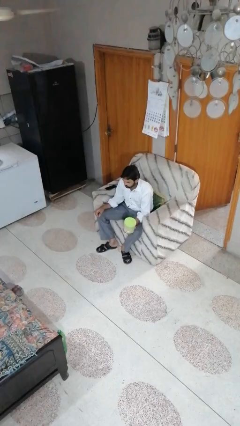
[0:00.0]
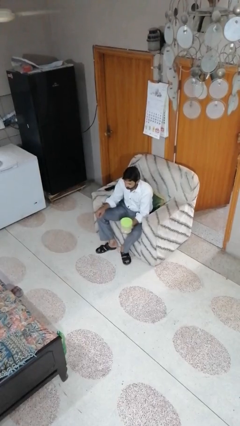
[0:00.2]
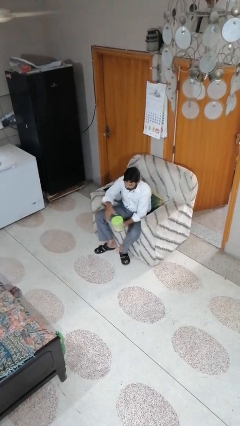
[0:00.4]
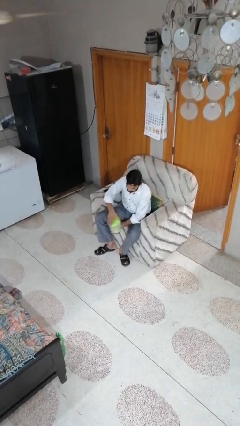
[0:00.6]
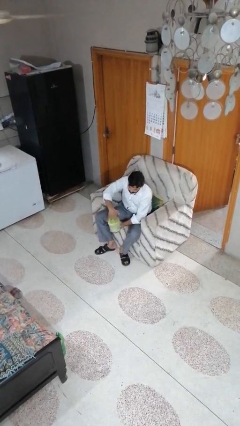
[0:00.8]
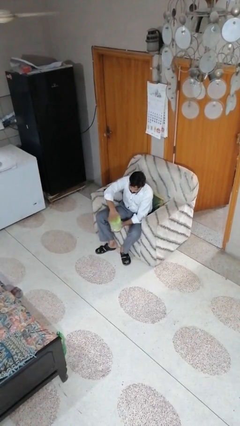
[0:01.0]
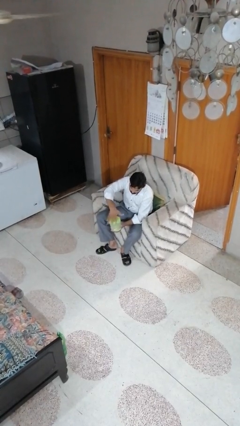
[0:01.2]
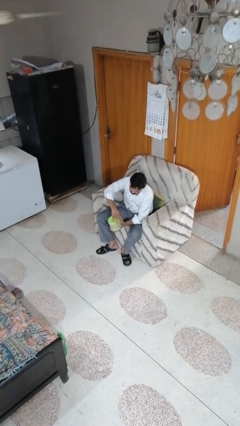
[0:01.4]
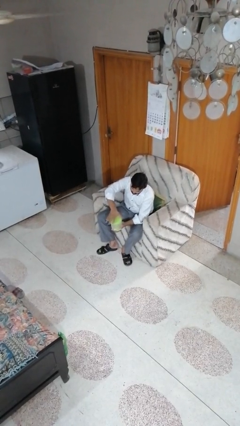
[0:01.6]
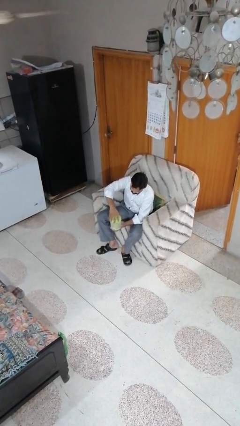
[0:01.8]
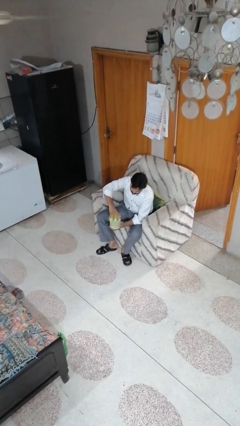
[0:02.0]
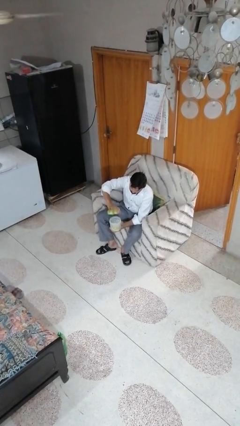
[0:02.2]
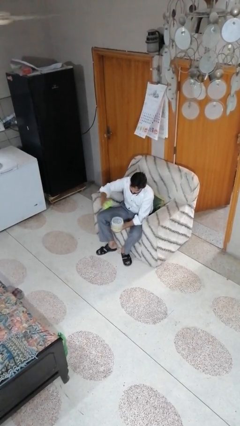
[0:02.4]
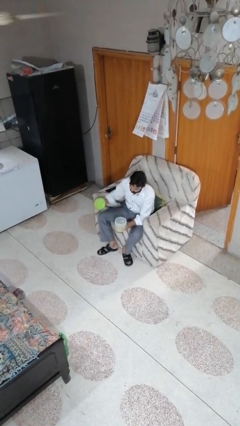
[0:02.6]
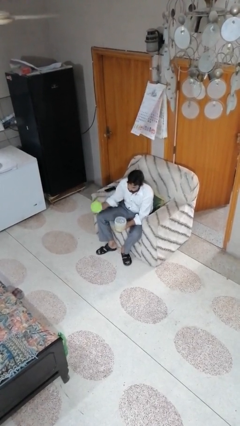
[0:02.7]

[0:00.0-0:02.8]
person opens jar

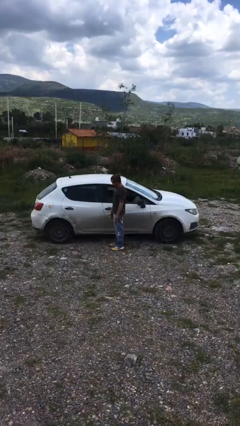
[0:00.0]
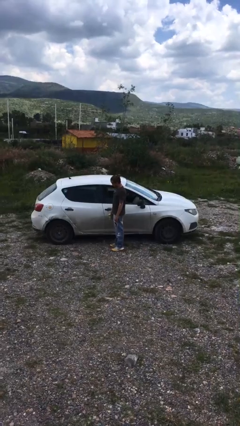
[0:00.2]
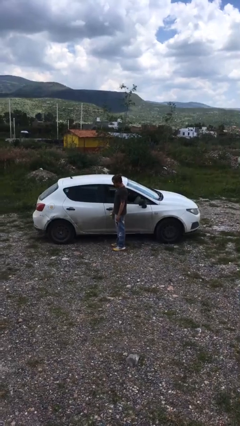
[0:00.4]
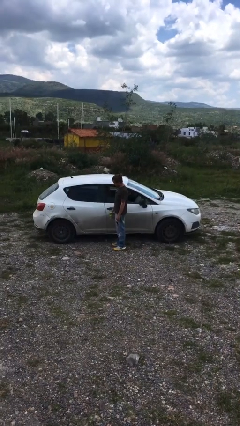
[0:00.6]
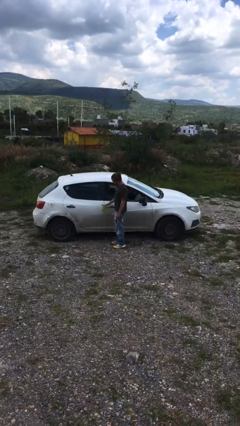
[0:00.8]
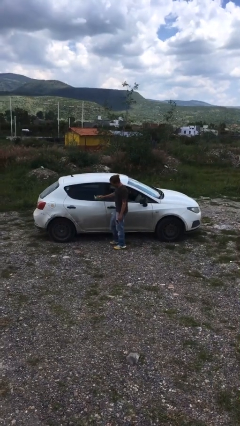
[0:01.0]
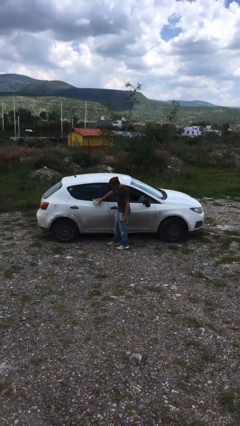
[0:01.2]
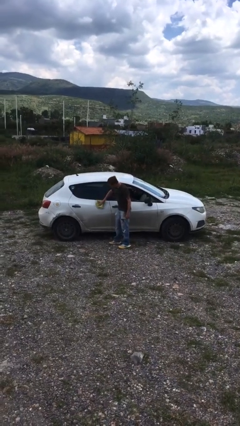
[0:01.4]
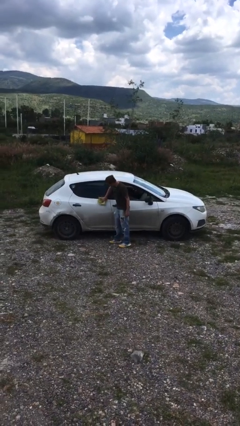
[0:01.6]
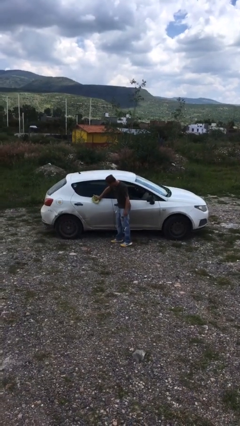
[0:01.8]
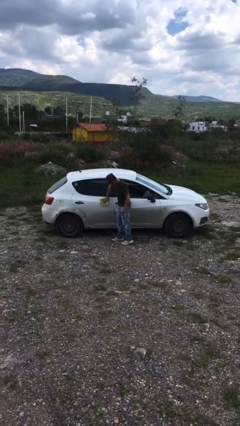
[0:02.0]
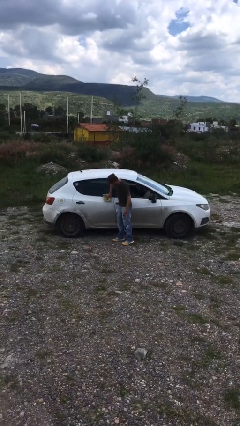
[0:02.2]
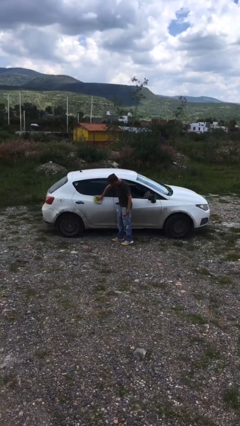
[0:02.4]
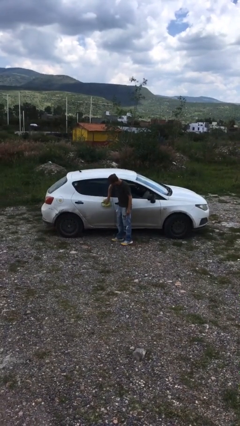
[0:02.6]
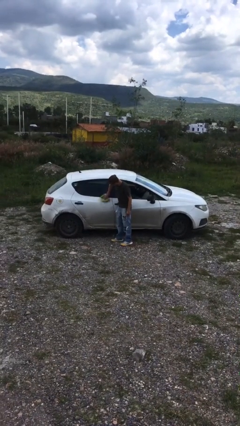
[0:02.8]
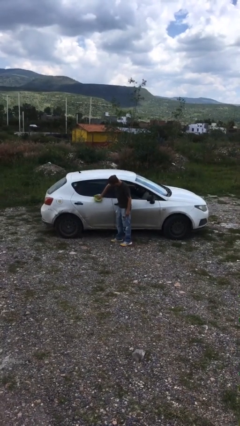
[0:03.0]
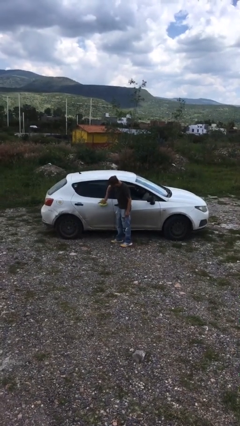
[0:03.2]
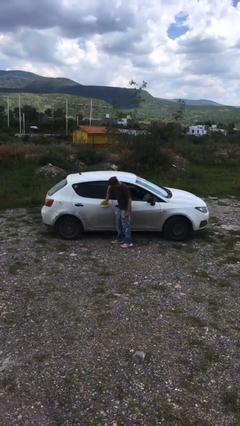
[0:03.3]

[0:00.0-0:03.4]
person polishes car with rag

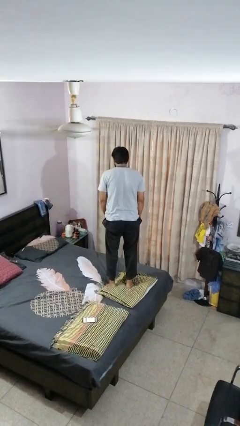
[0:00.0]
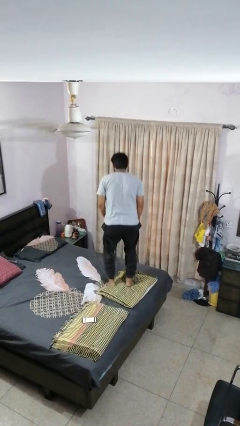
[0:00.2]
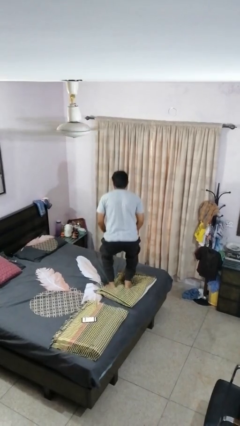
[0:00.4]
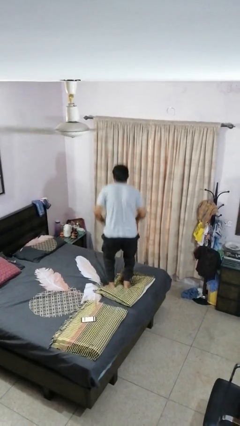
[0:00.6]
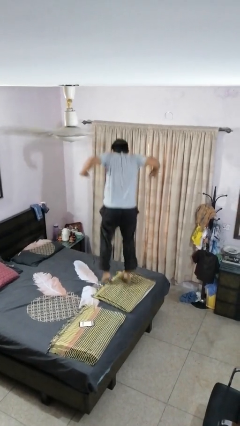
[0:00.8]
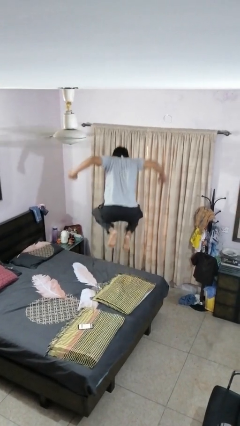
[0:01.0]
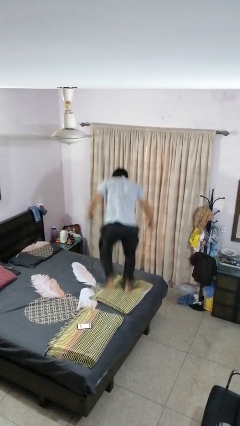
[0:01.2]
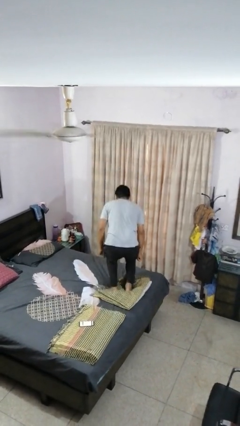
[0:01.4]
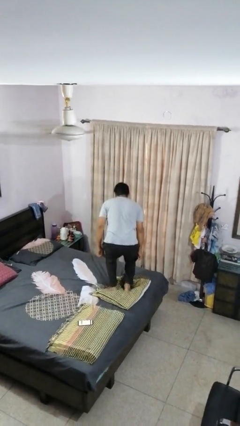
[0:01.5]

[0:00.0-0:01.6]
person jumps on bed

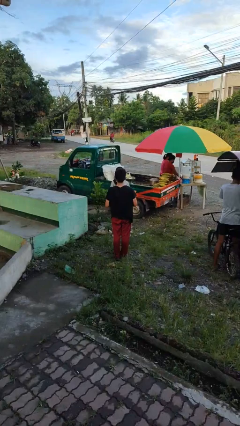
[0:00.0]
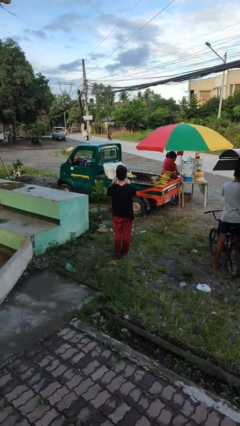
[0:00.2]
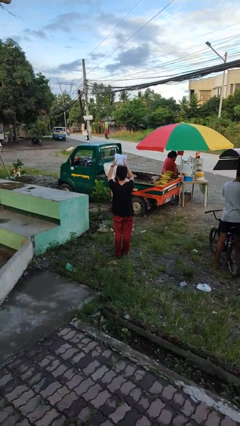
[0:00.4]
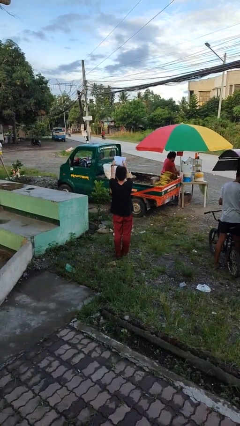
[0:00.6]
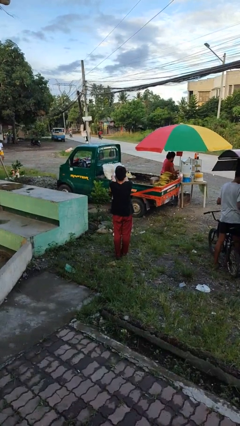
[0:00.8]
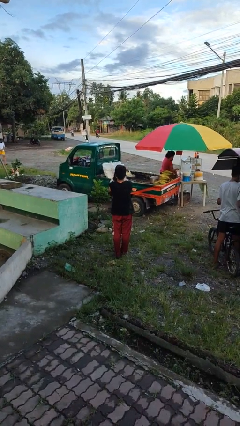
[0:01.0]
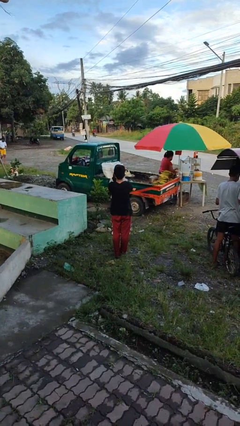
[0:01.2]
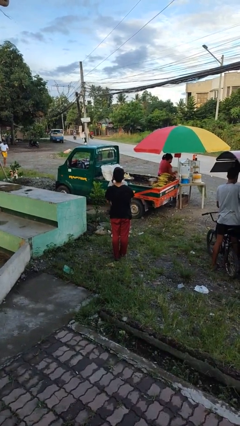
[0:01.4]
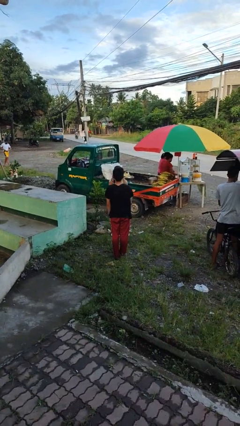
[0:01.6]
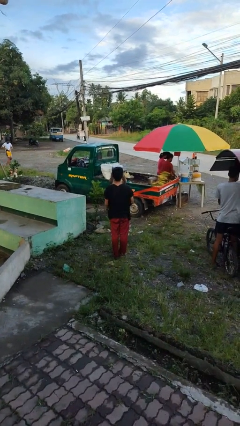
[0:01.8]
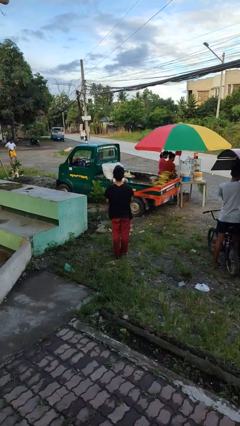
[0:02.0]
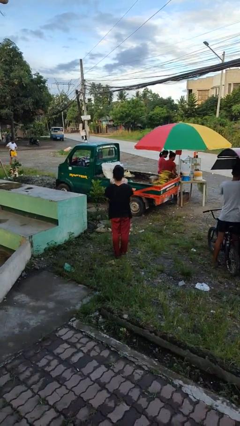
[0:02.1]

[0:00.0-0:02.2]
person transfers object to person

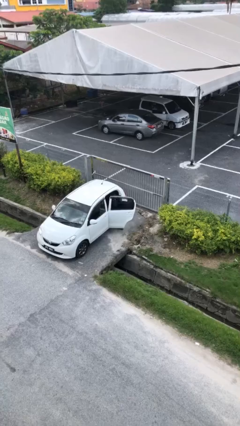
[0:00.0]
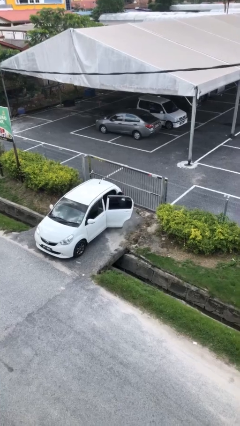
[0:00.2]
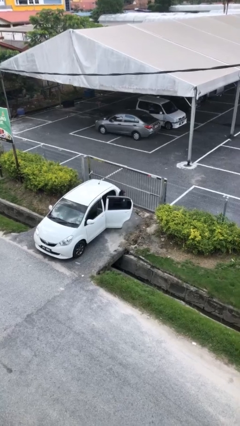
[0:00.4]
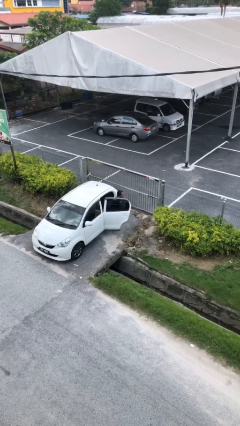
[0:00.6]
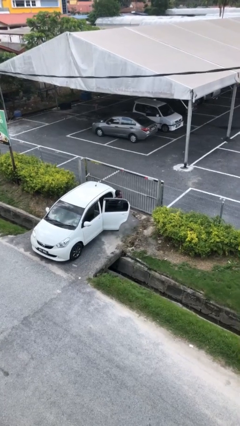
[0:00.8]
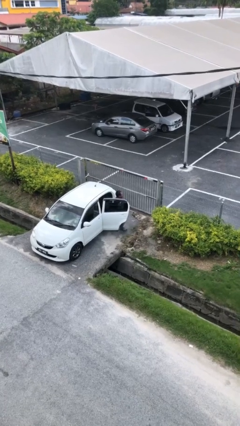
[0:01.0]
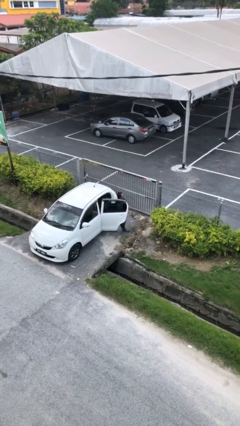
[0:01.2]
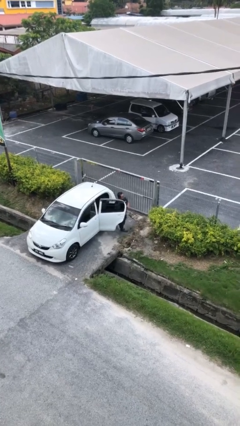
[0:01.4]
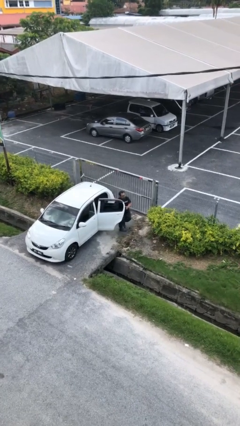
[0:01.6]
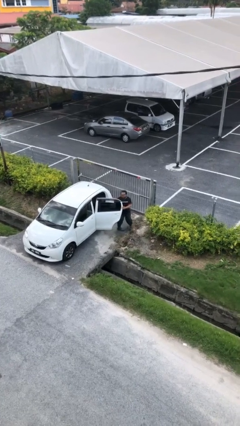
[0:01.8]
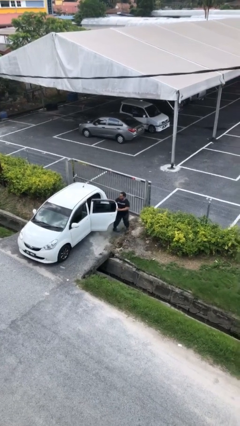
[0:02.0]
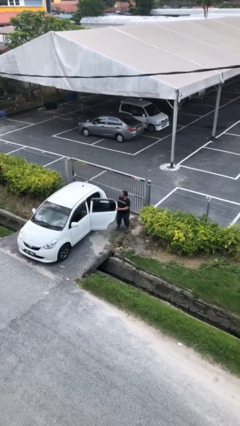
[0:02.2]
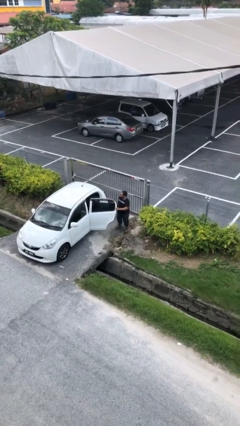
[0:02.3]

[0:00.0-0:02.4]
person exits car

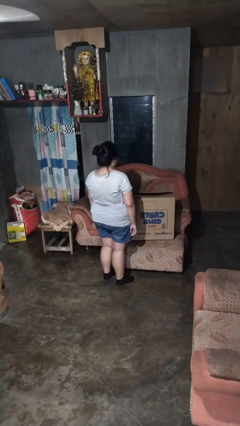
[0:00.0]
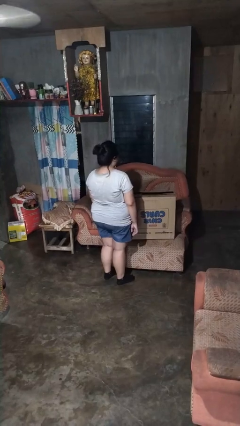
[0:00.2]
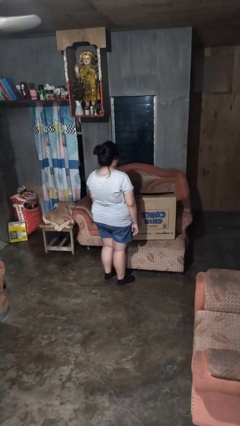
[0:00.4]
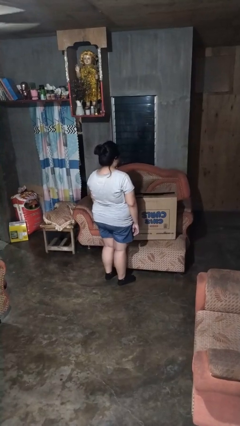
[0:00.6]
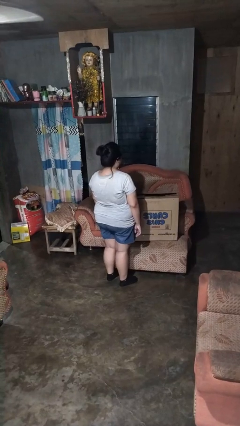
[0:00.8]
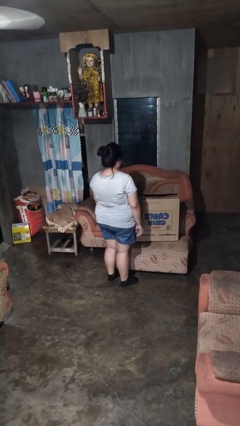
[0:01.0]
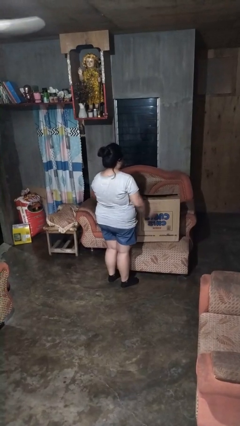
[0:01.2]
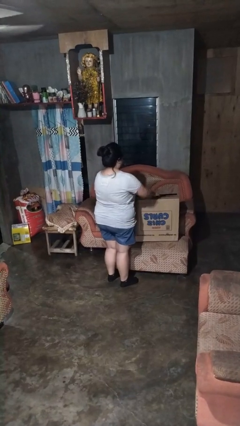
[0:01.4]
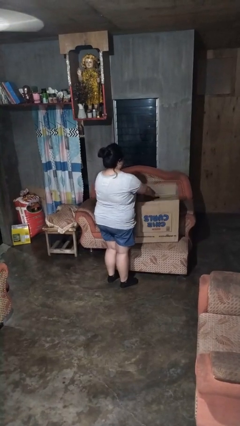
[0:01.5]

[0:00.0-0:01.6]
person opens box

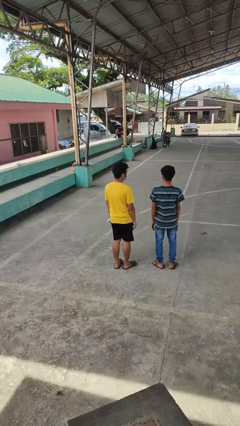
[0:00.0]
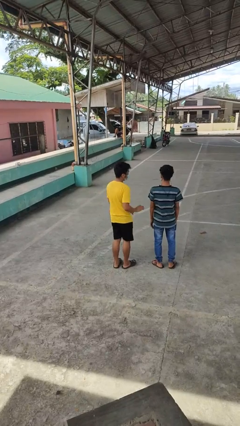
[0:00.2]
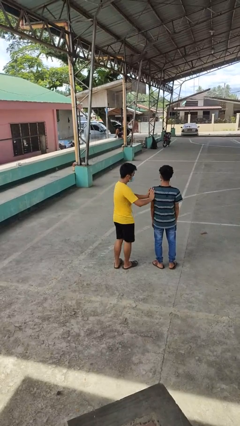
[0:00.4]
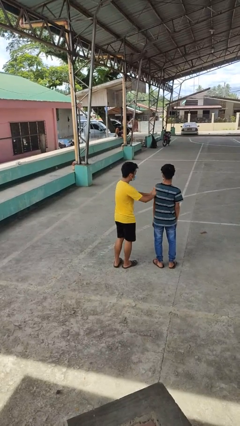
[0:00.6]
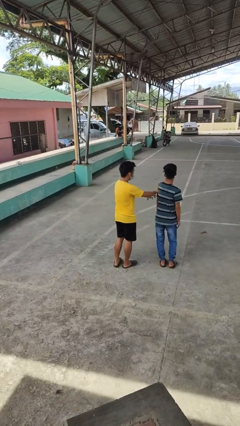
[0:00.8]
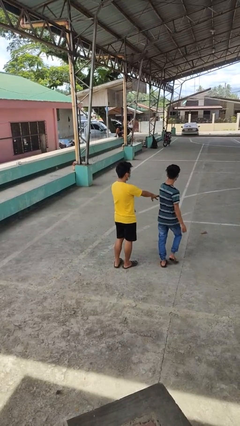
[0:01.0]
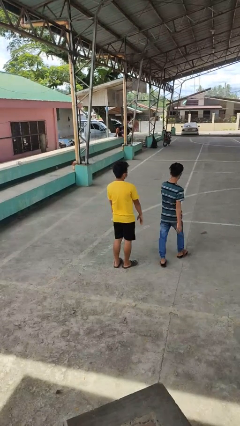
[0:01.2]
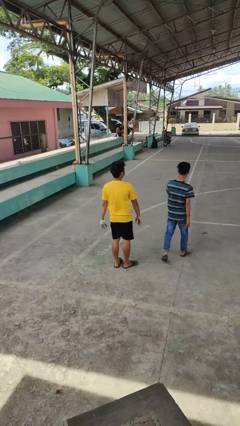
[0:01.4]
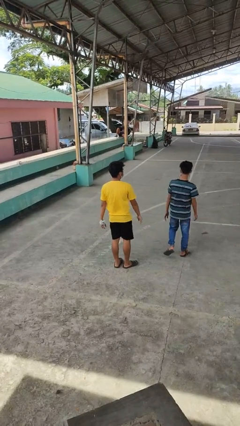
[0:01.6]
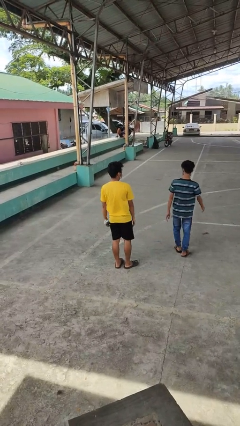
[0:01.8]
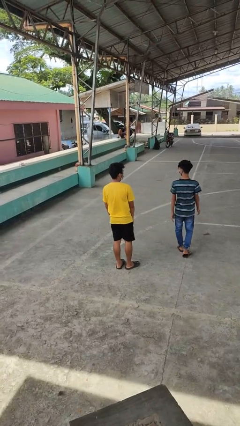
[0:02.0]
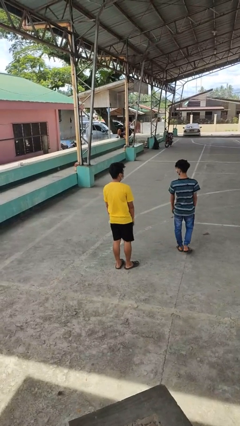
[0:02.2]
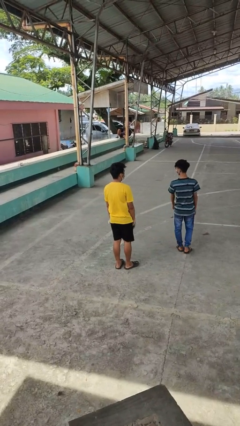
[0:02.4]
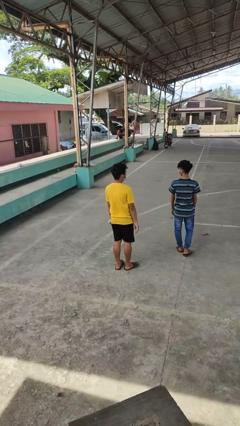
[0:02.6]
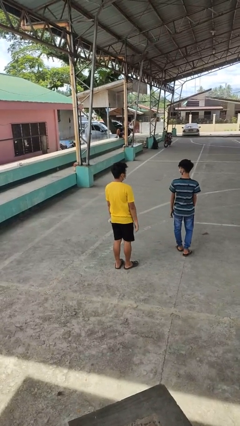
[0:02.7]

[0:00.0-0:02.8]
person shoves person

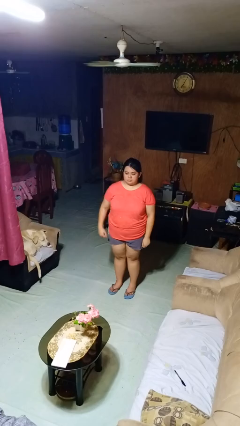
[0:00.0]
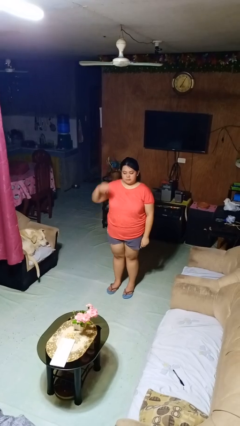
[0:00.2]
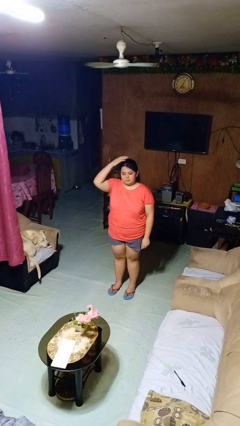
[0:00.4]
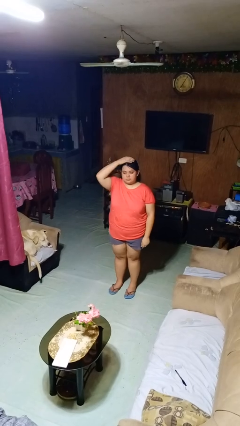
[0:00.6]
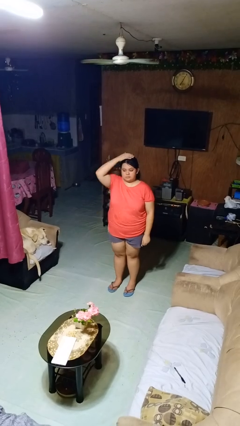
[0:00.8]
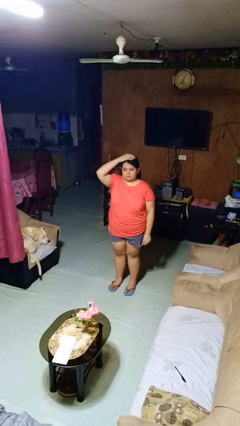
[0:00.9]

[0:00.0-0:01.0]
person pats head
